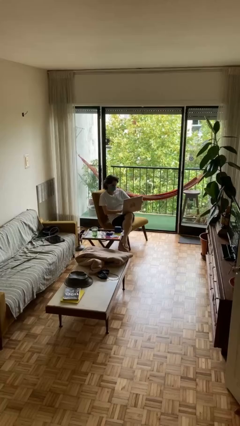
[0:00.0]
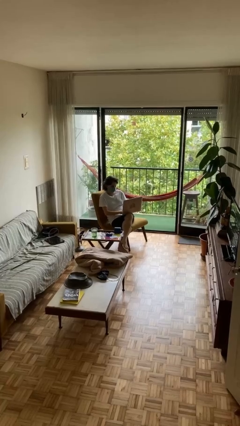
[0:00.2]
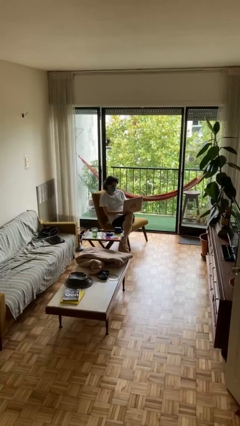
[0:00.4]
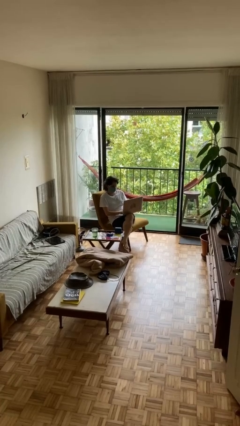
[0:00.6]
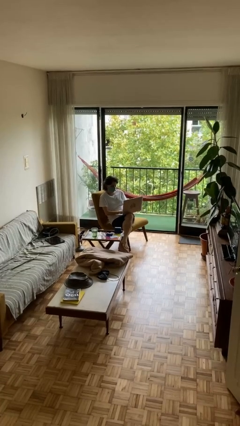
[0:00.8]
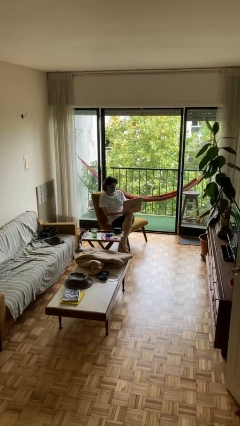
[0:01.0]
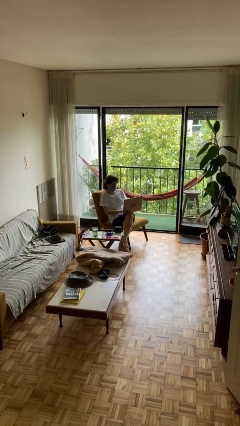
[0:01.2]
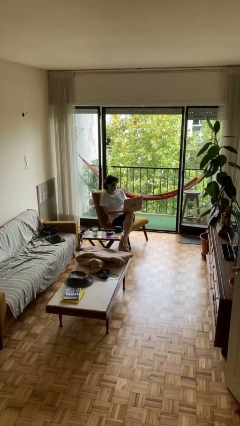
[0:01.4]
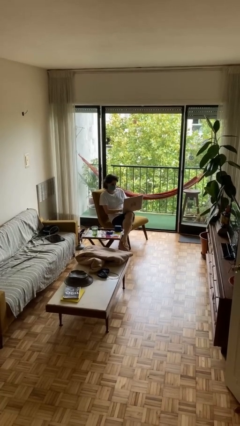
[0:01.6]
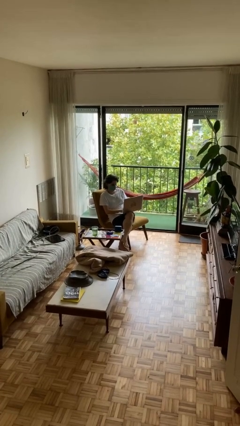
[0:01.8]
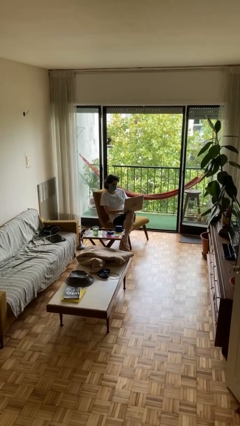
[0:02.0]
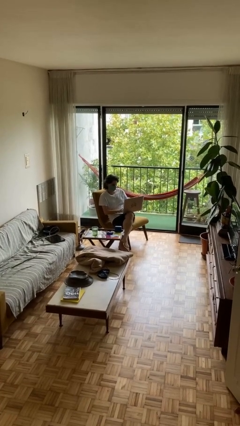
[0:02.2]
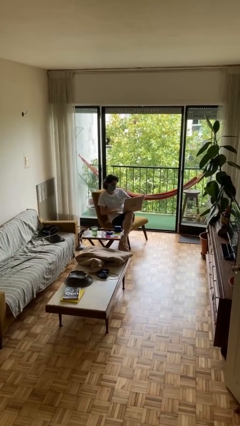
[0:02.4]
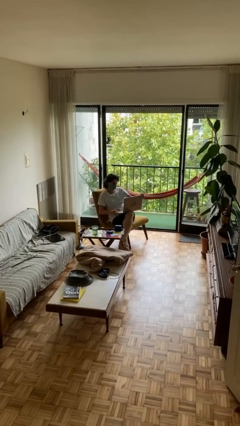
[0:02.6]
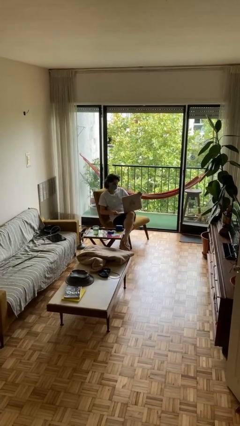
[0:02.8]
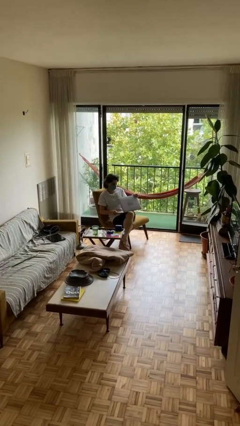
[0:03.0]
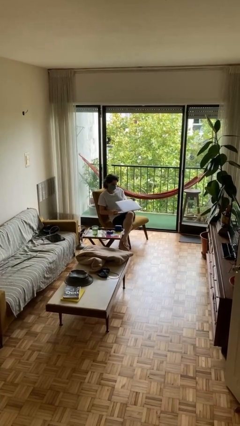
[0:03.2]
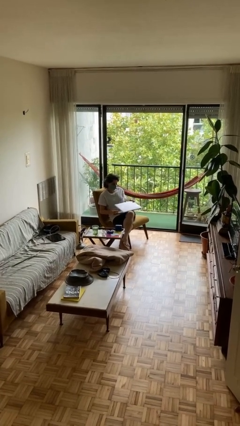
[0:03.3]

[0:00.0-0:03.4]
person interacts with laptop

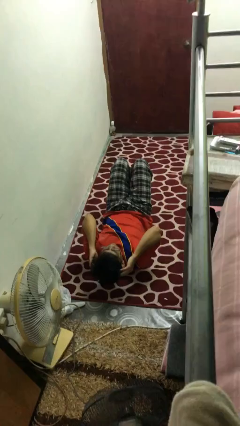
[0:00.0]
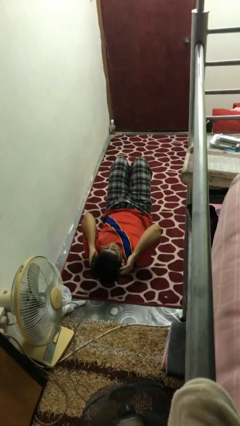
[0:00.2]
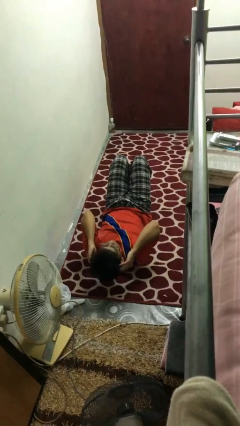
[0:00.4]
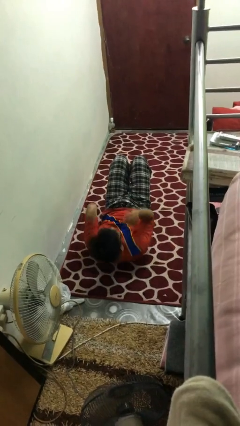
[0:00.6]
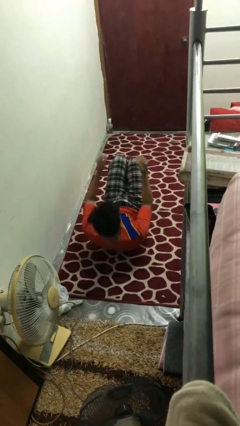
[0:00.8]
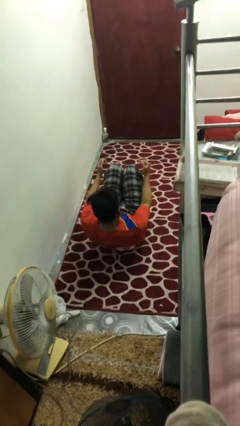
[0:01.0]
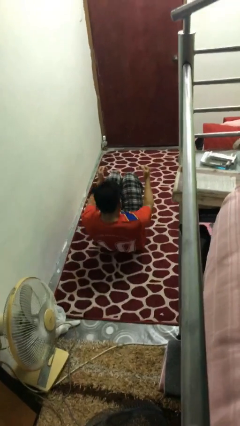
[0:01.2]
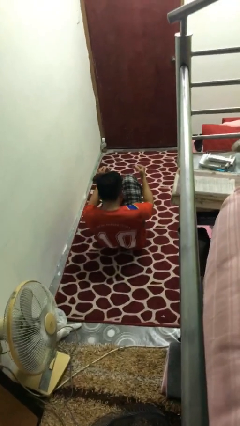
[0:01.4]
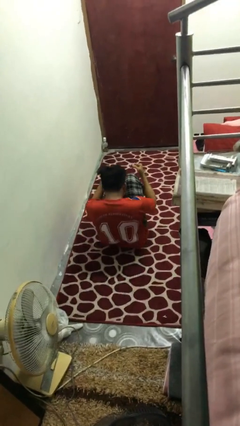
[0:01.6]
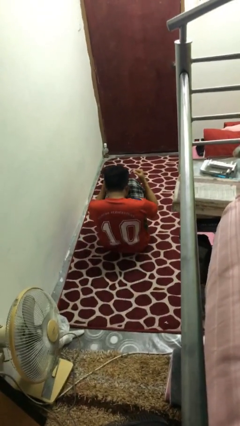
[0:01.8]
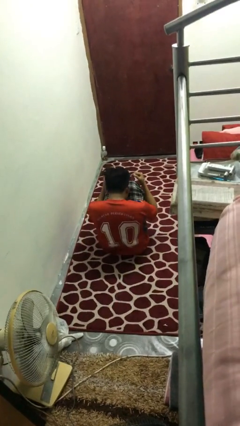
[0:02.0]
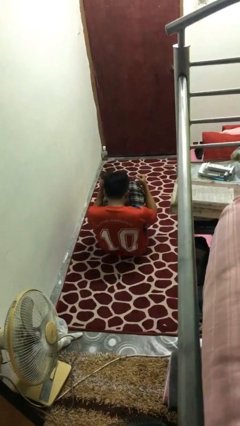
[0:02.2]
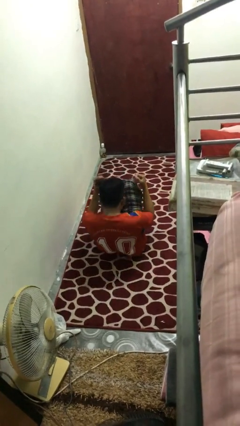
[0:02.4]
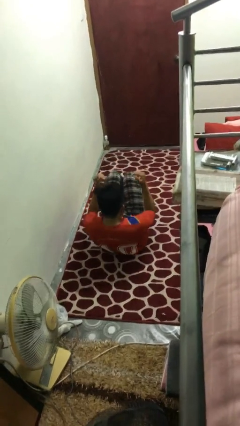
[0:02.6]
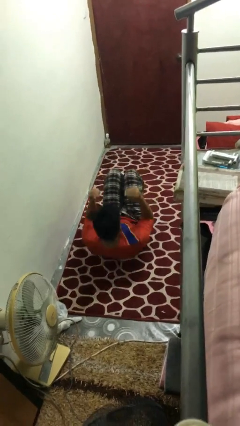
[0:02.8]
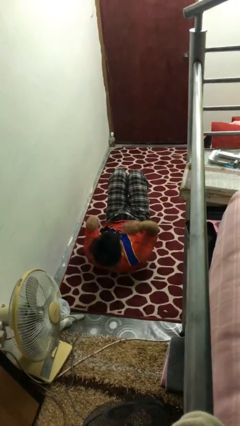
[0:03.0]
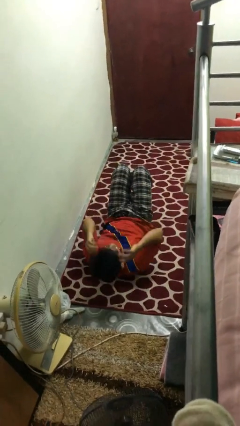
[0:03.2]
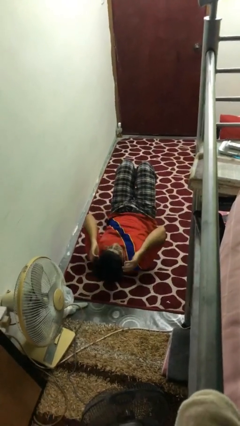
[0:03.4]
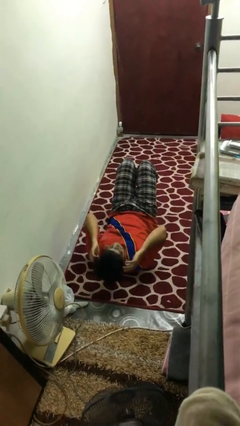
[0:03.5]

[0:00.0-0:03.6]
person exercises with situp

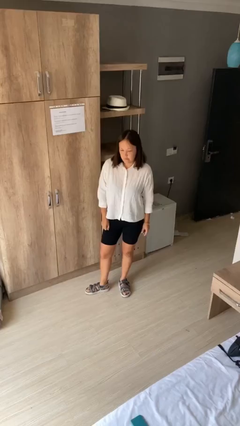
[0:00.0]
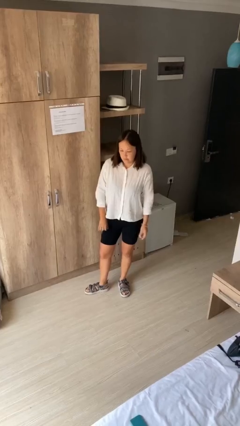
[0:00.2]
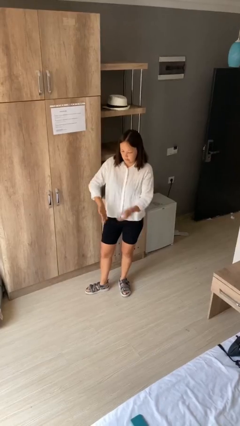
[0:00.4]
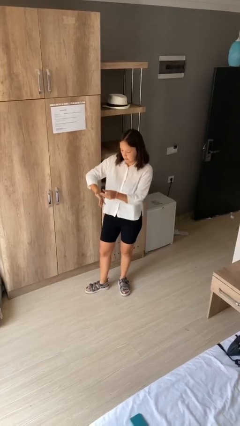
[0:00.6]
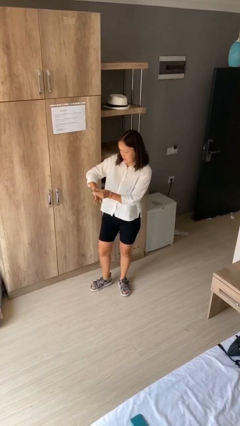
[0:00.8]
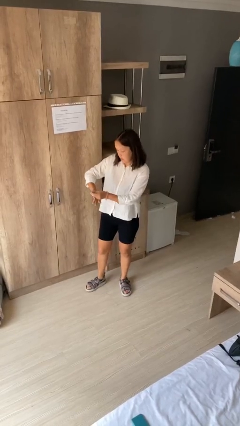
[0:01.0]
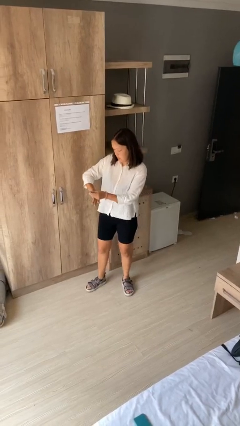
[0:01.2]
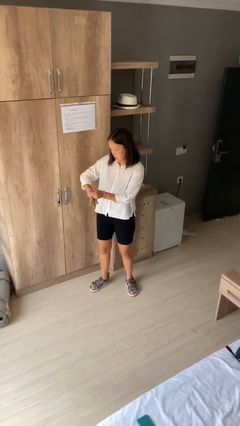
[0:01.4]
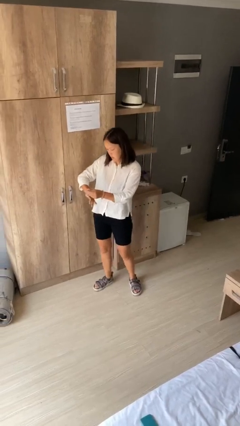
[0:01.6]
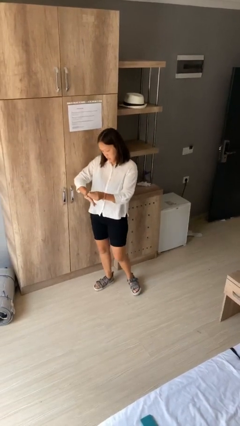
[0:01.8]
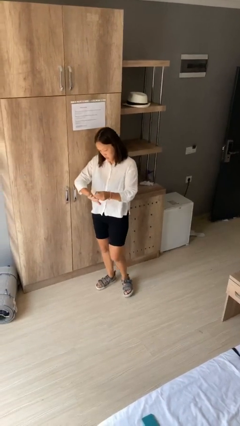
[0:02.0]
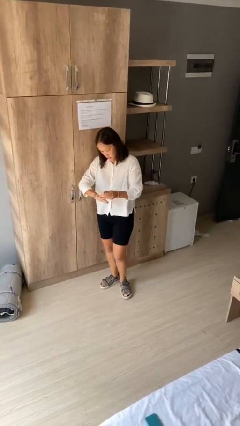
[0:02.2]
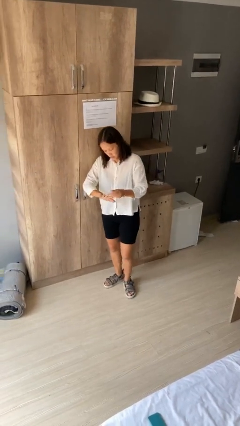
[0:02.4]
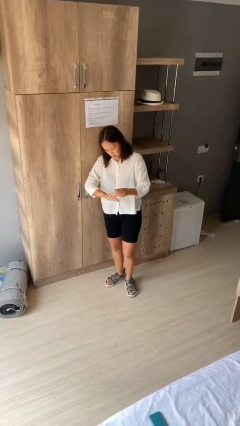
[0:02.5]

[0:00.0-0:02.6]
person clips fingernails

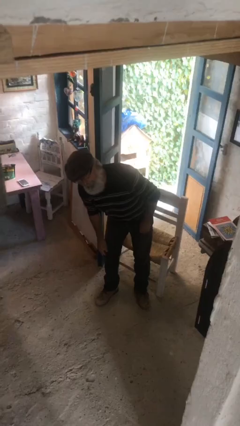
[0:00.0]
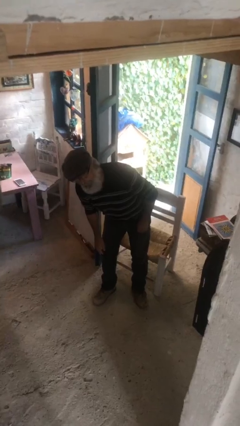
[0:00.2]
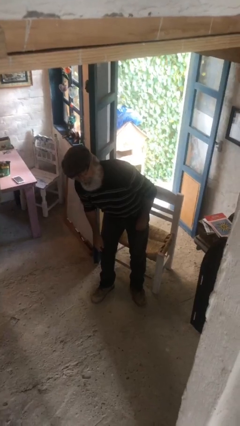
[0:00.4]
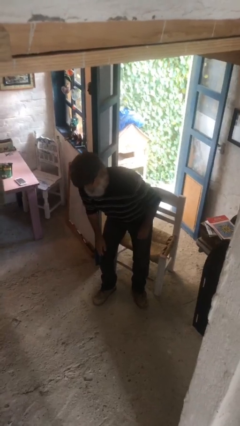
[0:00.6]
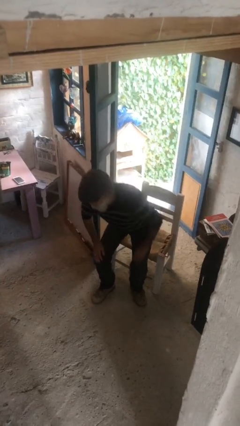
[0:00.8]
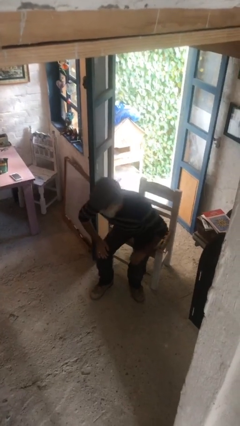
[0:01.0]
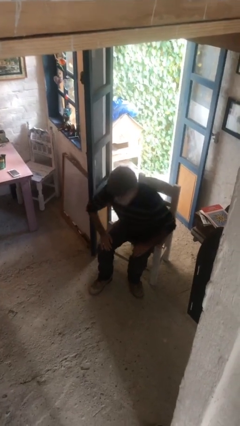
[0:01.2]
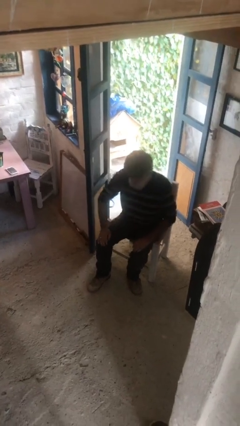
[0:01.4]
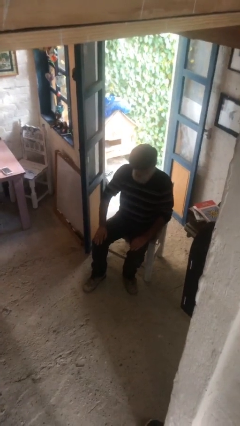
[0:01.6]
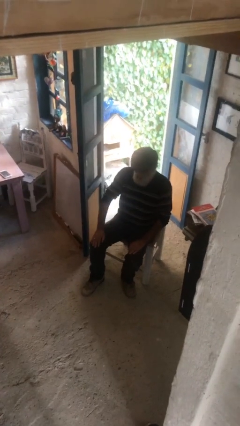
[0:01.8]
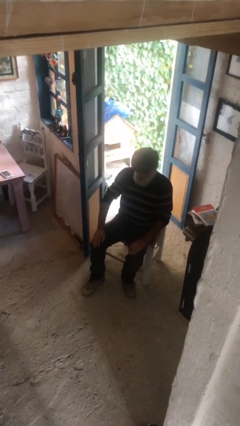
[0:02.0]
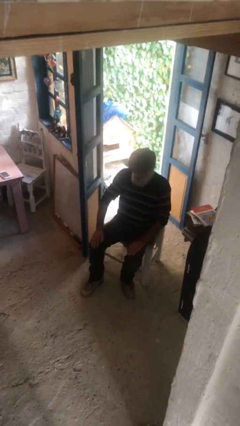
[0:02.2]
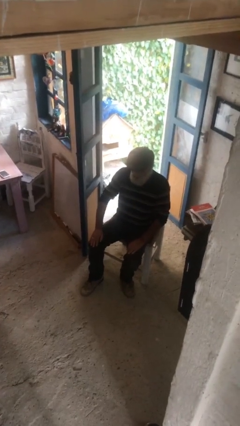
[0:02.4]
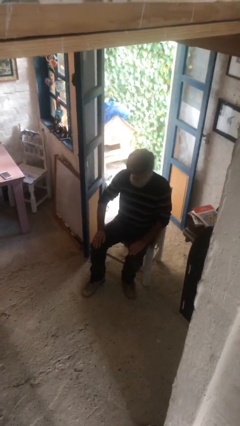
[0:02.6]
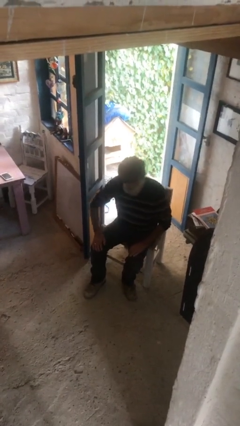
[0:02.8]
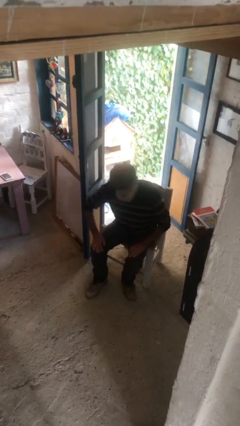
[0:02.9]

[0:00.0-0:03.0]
person sits down

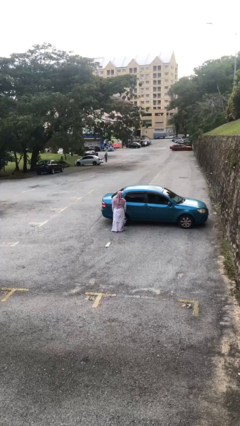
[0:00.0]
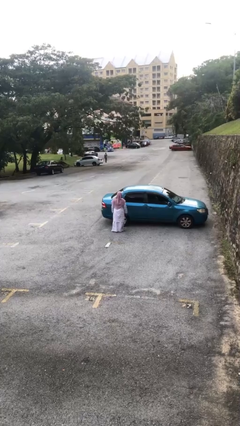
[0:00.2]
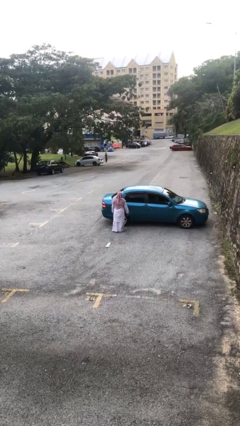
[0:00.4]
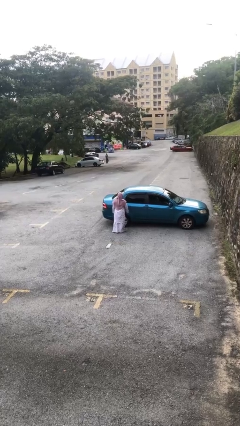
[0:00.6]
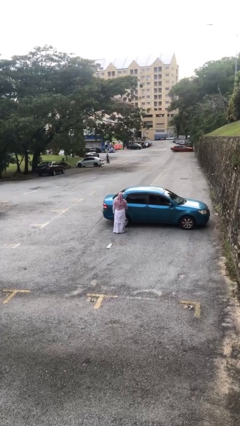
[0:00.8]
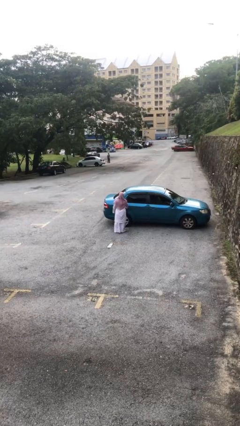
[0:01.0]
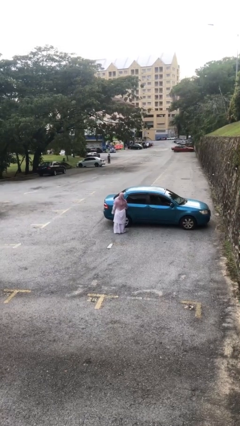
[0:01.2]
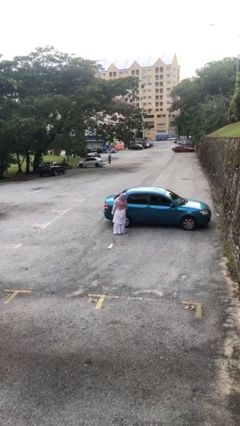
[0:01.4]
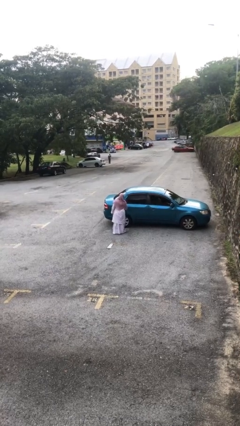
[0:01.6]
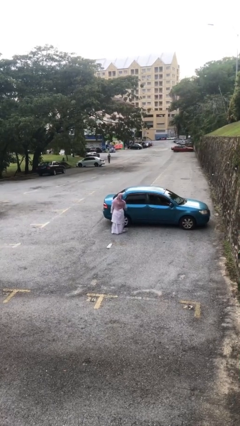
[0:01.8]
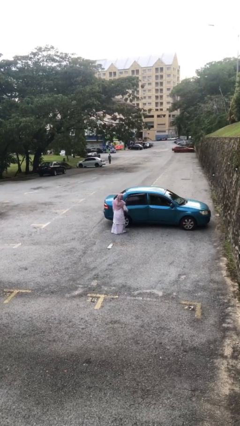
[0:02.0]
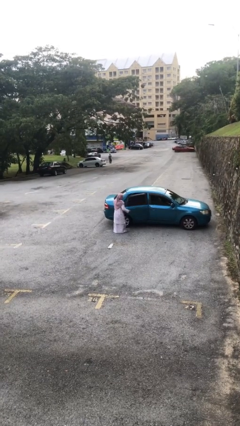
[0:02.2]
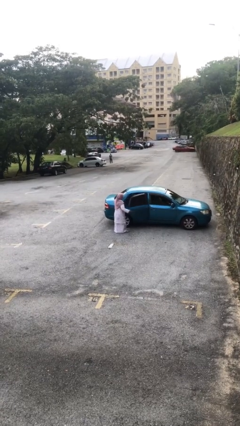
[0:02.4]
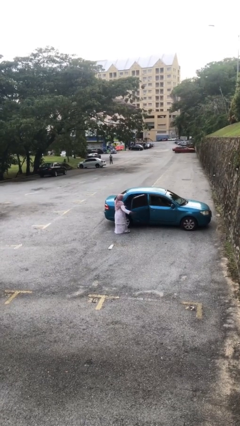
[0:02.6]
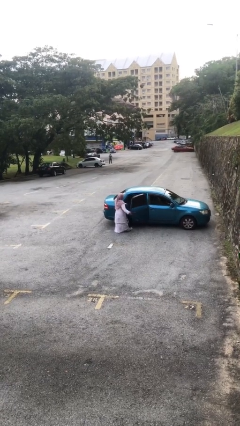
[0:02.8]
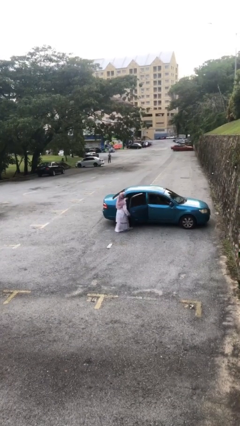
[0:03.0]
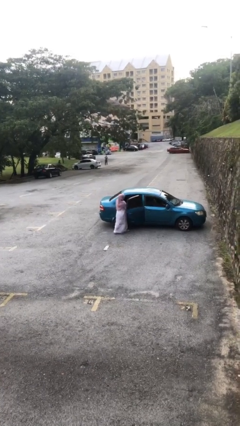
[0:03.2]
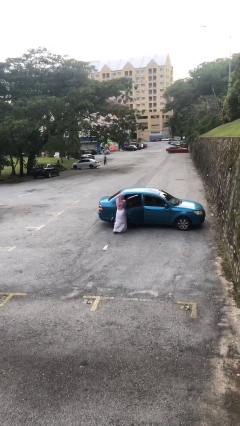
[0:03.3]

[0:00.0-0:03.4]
person opens car door

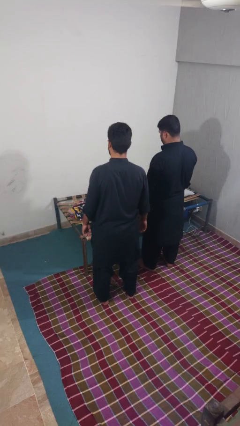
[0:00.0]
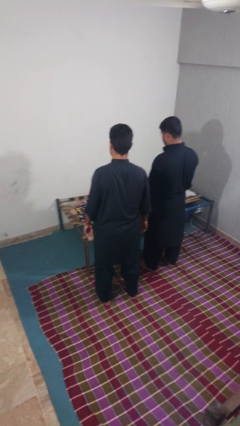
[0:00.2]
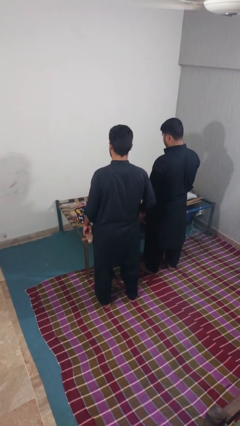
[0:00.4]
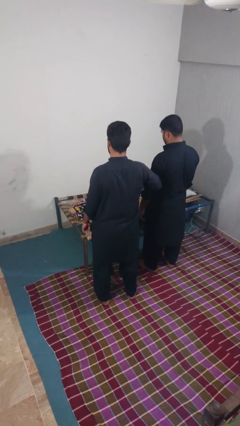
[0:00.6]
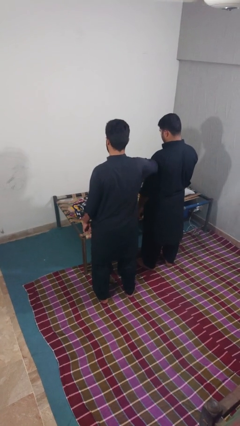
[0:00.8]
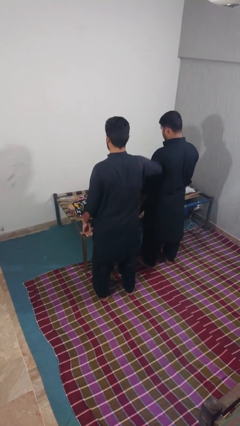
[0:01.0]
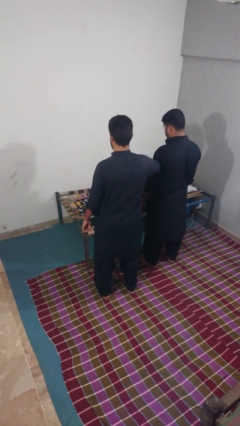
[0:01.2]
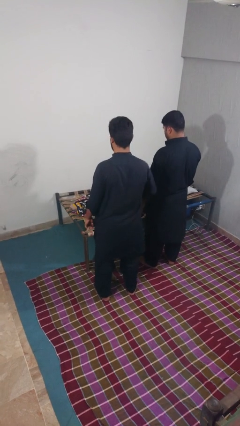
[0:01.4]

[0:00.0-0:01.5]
person nudges person with elbow
